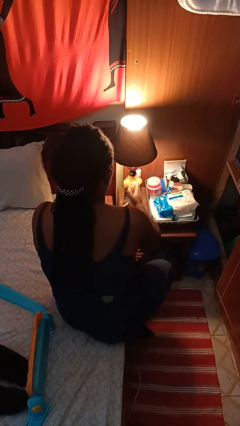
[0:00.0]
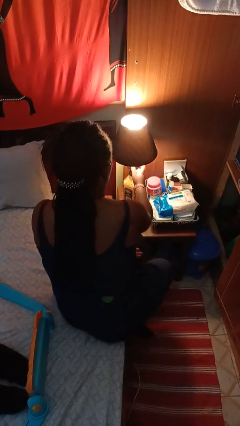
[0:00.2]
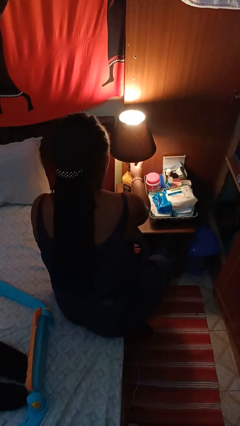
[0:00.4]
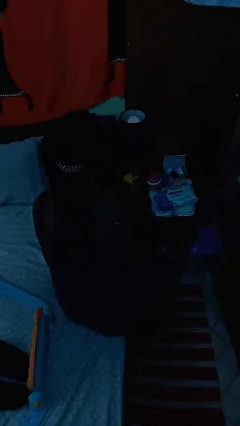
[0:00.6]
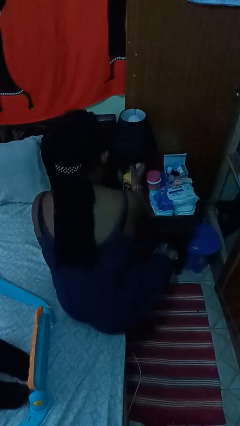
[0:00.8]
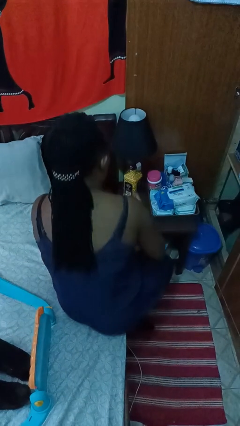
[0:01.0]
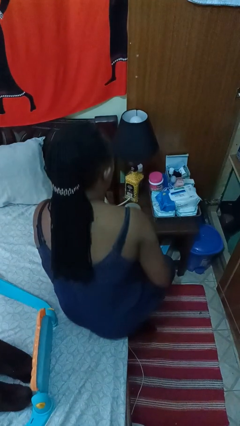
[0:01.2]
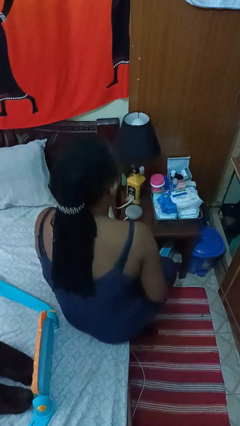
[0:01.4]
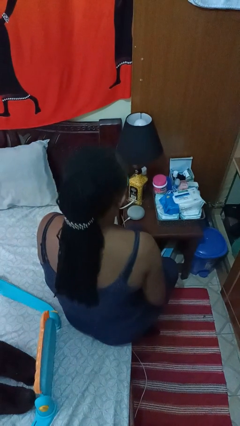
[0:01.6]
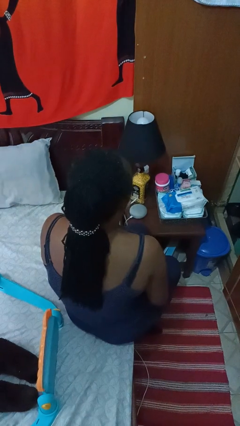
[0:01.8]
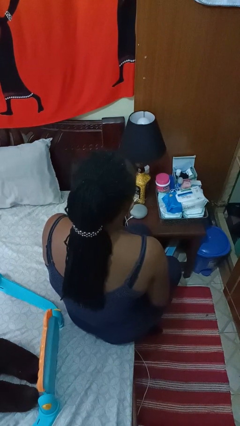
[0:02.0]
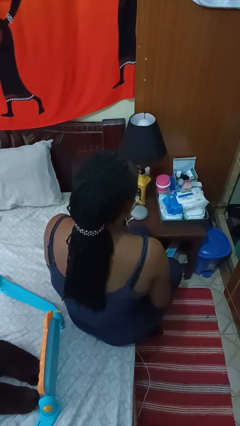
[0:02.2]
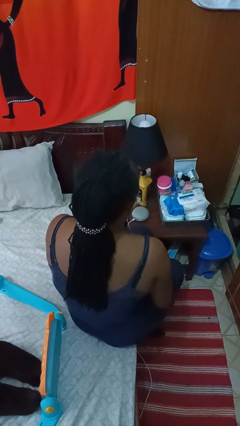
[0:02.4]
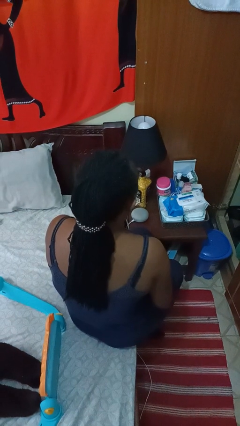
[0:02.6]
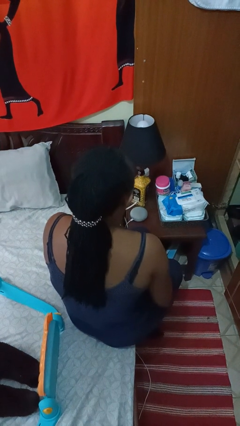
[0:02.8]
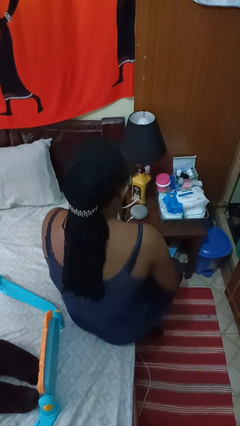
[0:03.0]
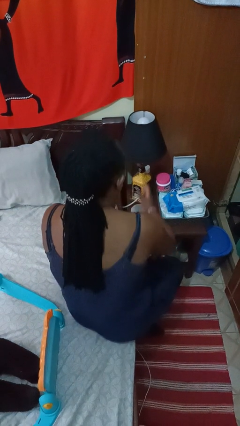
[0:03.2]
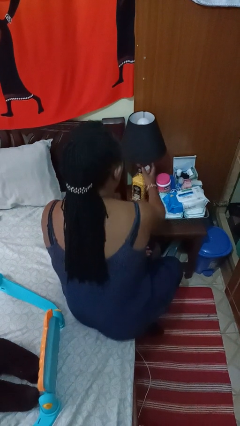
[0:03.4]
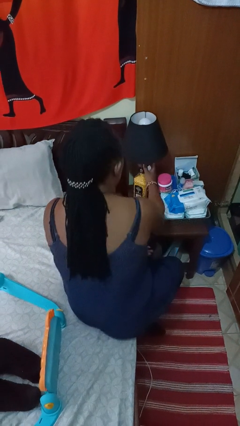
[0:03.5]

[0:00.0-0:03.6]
person turns off lamp

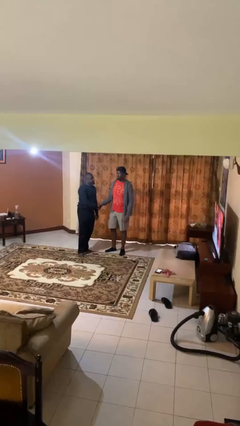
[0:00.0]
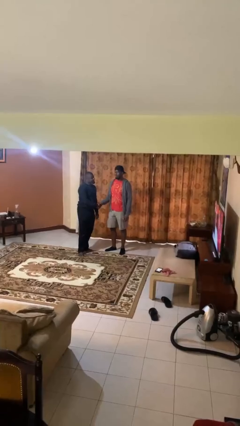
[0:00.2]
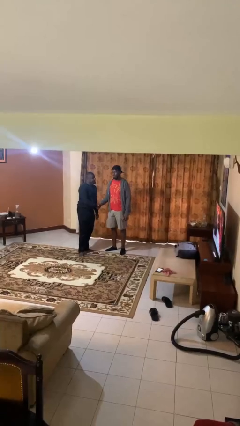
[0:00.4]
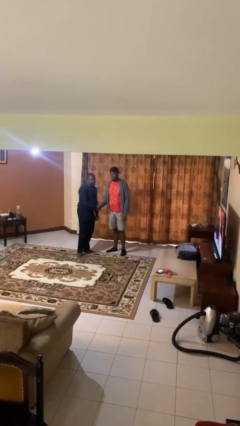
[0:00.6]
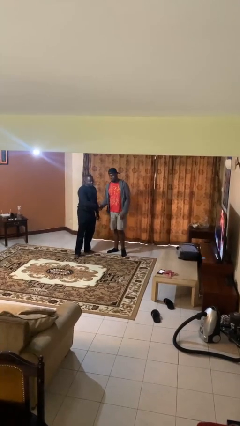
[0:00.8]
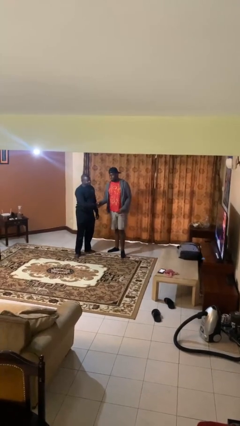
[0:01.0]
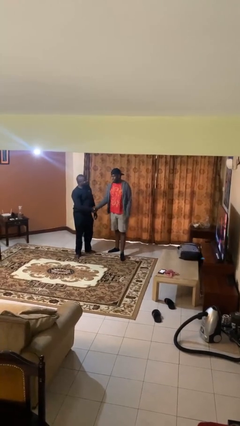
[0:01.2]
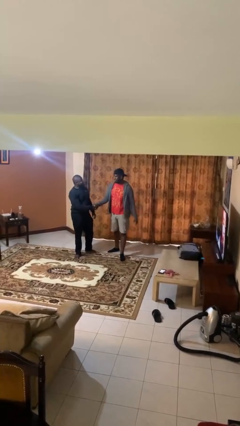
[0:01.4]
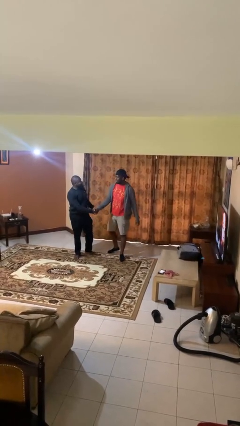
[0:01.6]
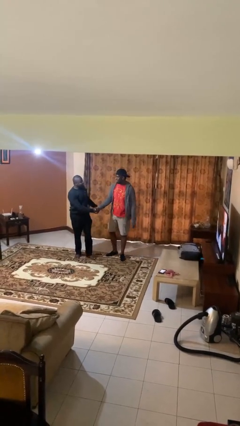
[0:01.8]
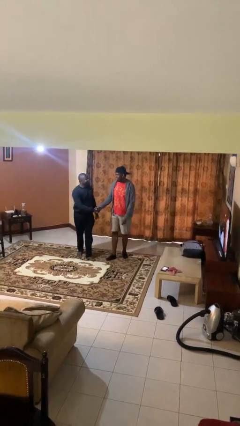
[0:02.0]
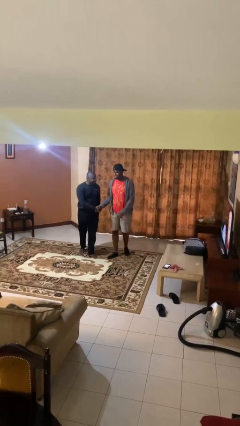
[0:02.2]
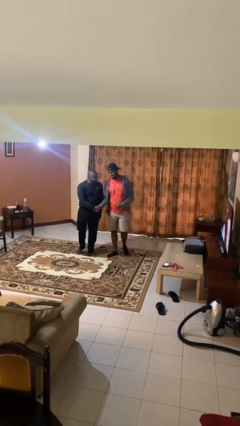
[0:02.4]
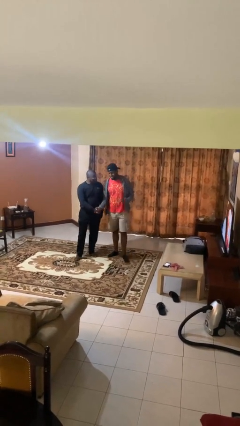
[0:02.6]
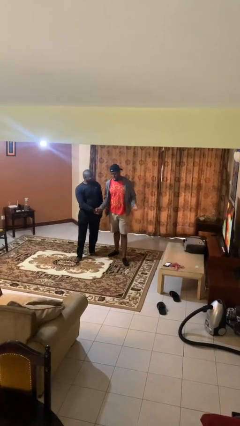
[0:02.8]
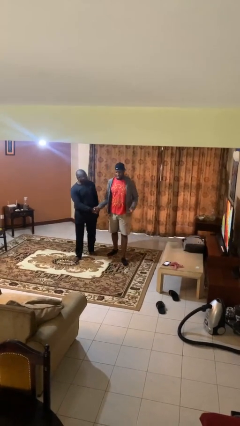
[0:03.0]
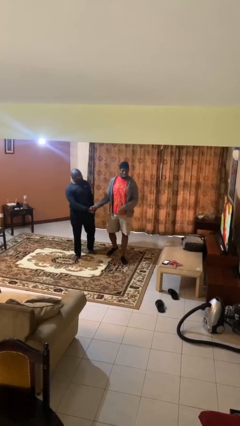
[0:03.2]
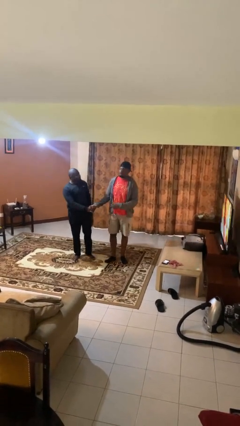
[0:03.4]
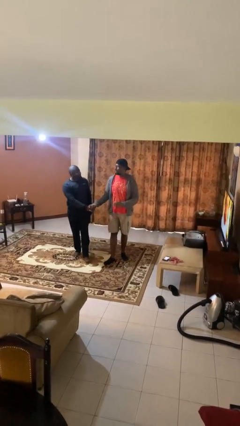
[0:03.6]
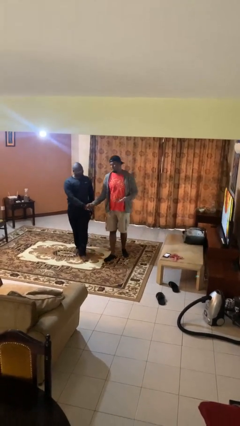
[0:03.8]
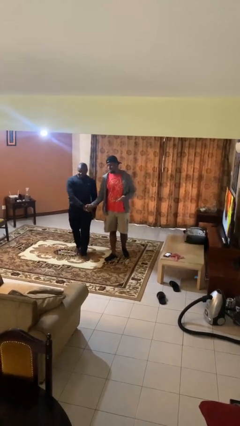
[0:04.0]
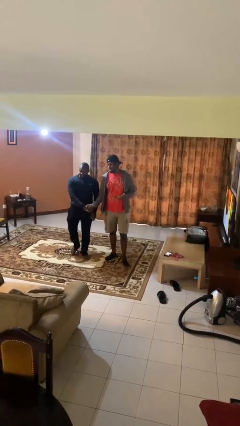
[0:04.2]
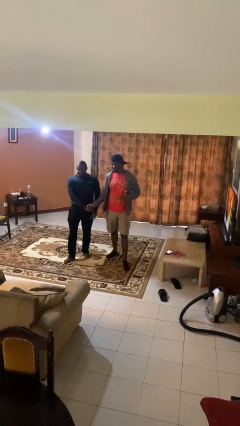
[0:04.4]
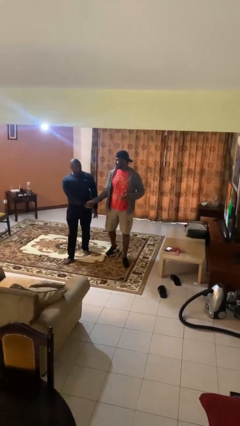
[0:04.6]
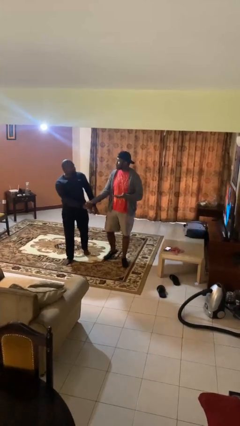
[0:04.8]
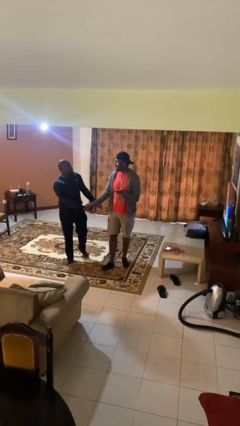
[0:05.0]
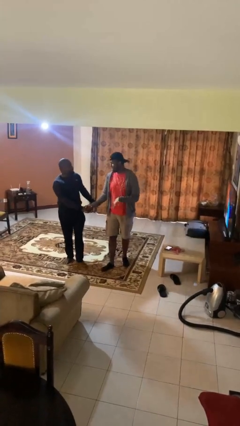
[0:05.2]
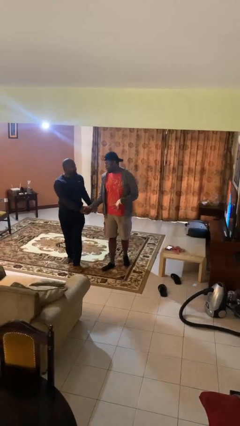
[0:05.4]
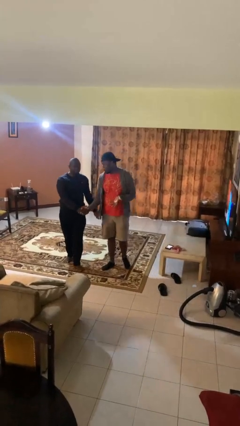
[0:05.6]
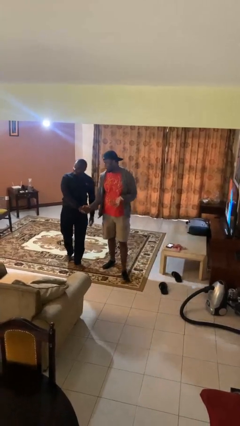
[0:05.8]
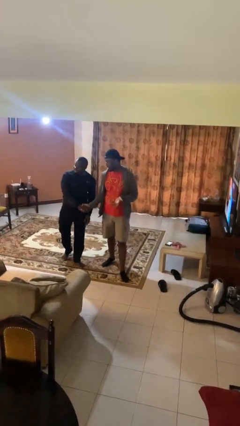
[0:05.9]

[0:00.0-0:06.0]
person holds hand

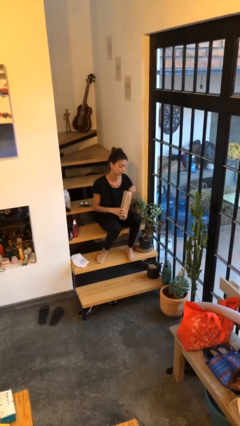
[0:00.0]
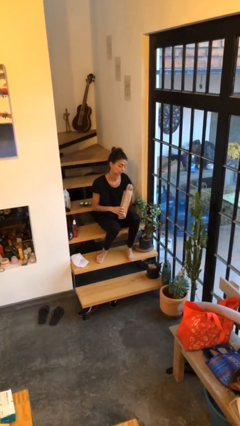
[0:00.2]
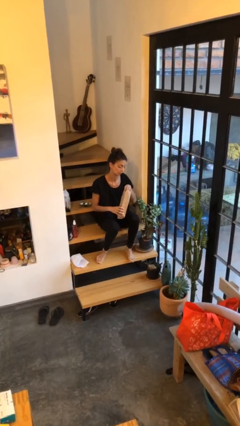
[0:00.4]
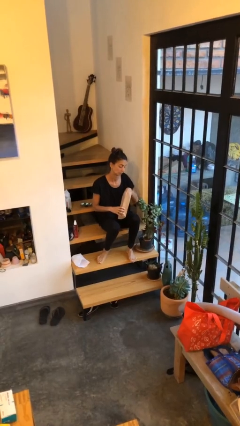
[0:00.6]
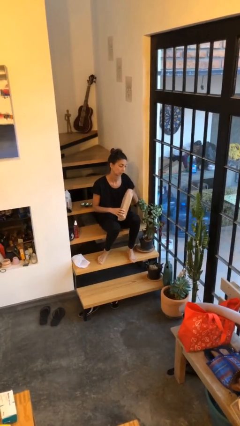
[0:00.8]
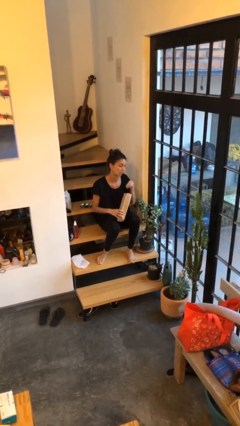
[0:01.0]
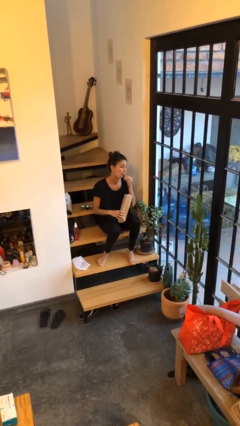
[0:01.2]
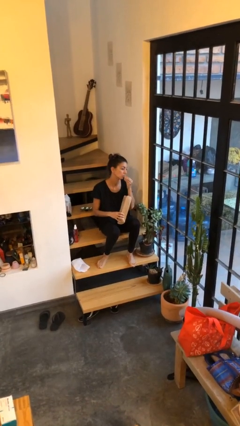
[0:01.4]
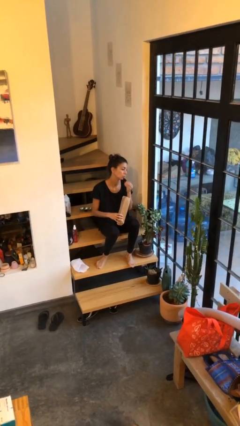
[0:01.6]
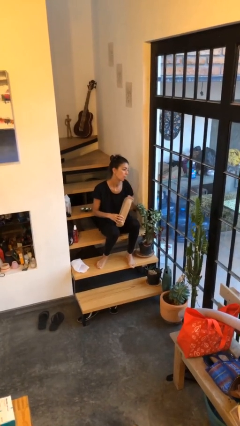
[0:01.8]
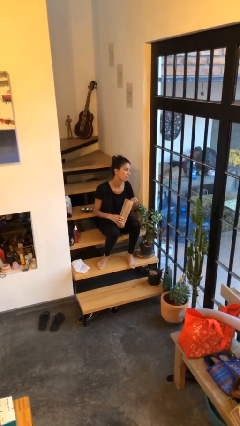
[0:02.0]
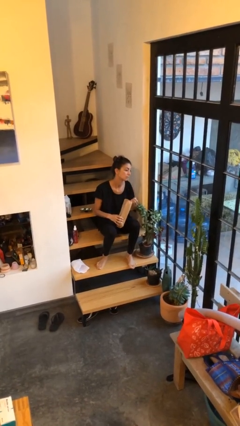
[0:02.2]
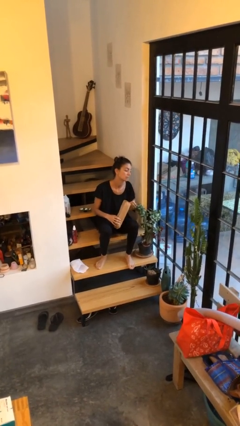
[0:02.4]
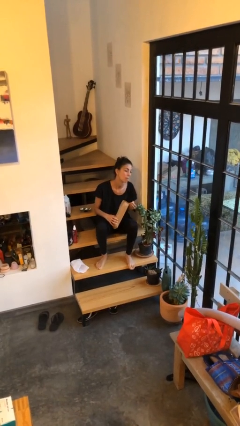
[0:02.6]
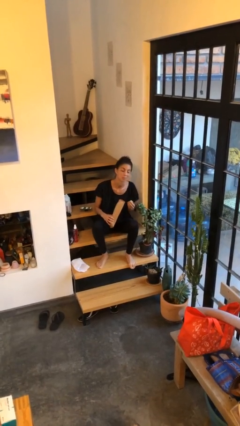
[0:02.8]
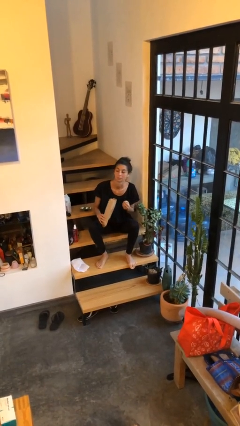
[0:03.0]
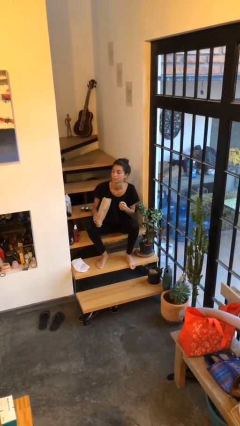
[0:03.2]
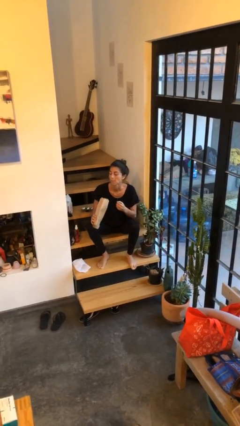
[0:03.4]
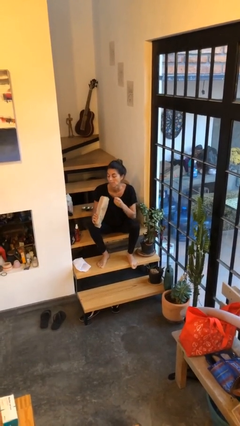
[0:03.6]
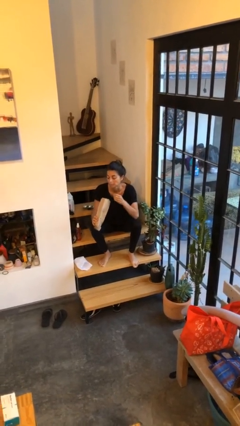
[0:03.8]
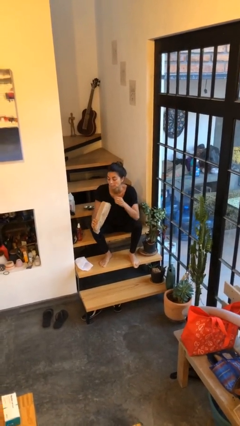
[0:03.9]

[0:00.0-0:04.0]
person eats snack from bag

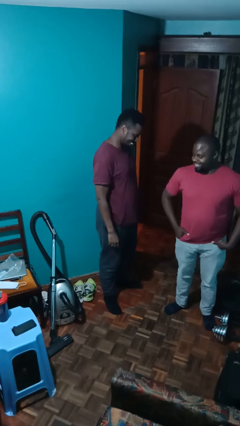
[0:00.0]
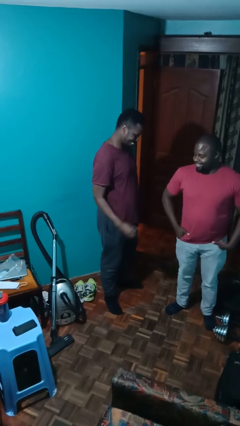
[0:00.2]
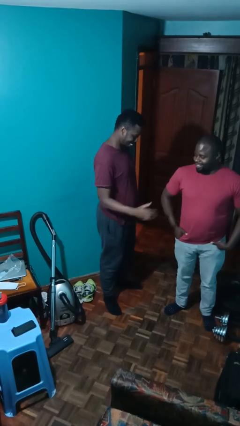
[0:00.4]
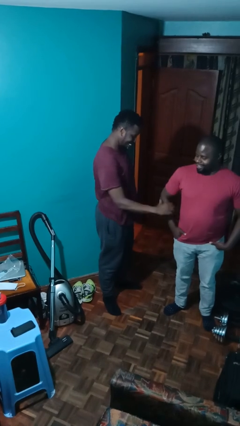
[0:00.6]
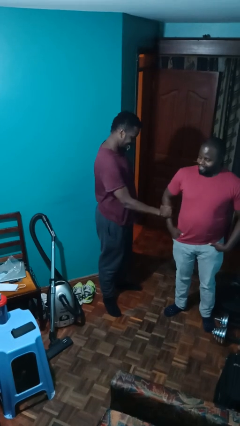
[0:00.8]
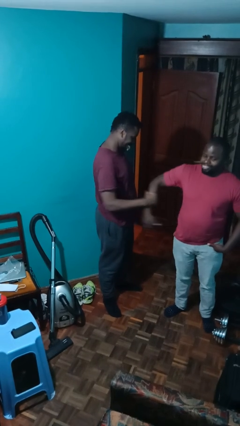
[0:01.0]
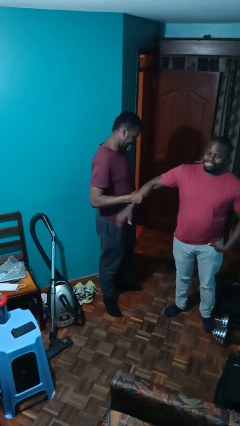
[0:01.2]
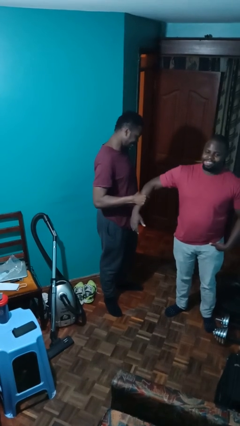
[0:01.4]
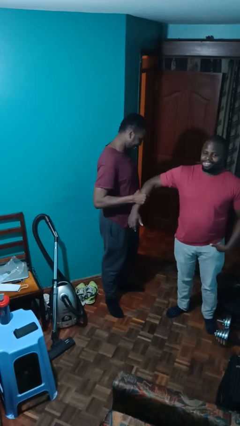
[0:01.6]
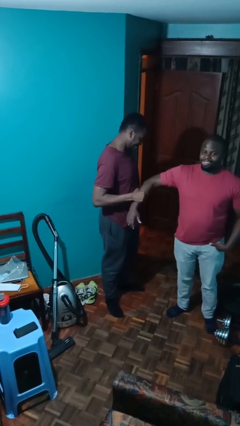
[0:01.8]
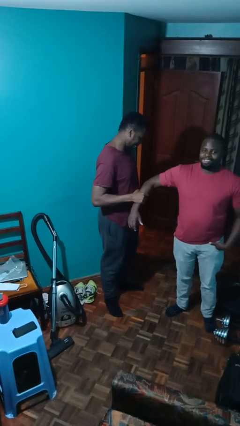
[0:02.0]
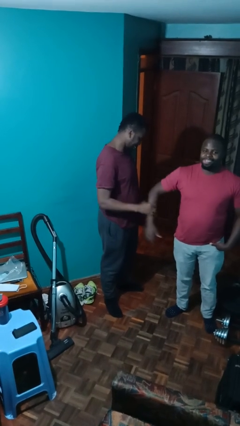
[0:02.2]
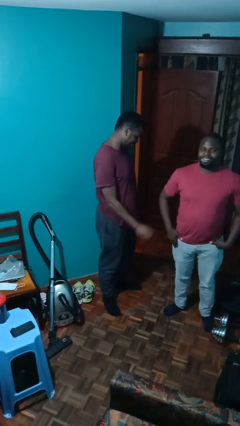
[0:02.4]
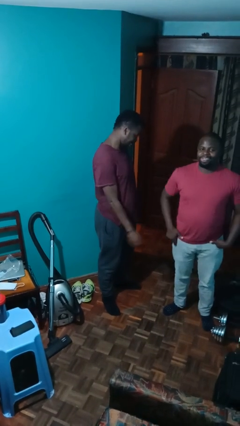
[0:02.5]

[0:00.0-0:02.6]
person grabs person by forearm

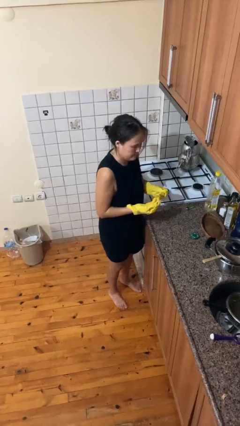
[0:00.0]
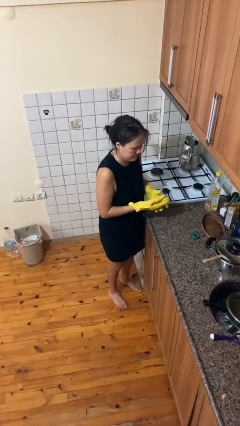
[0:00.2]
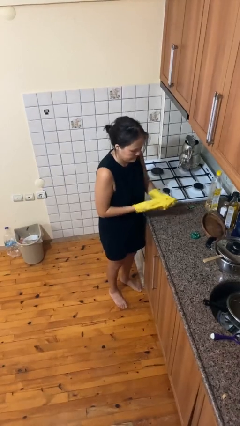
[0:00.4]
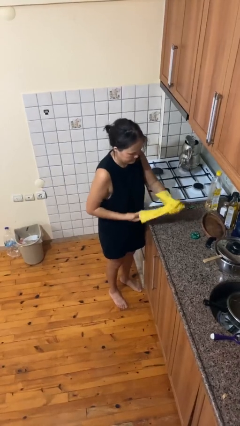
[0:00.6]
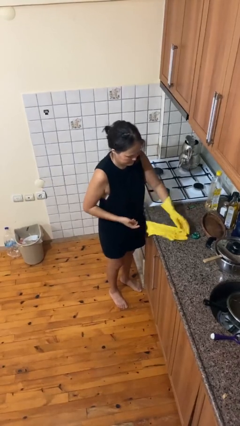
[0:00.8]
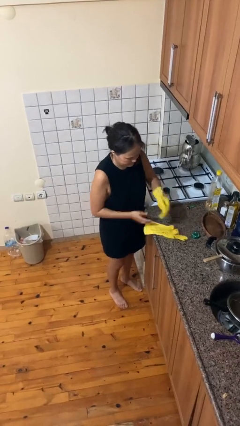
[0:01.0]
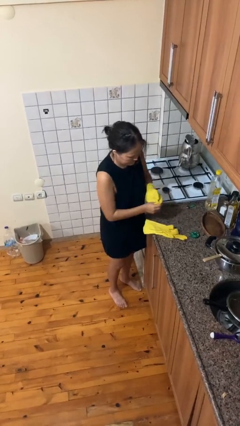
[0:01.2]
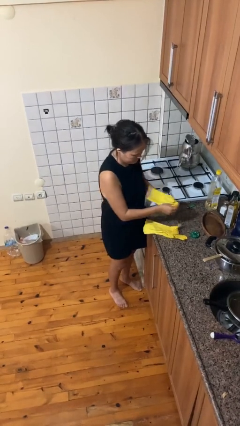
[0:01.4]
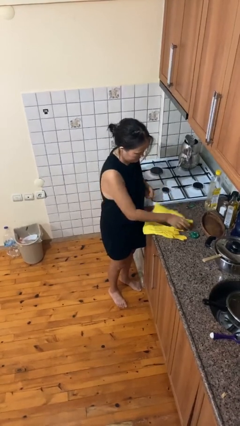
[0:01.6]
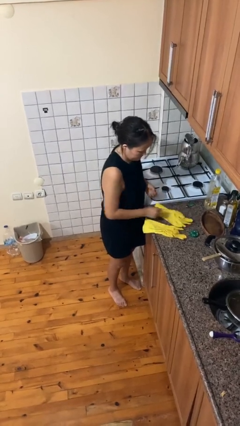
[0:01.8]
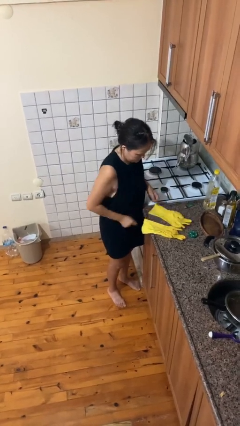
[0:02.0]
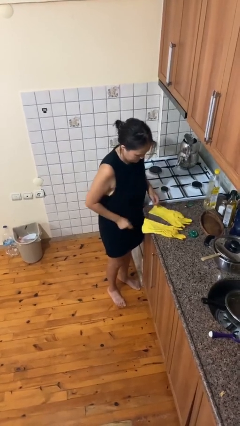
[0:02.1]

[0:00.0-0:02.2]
person takes off gloves
